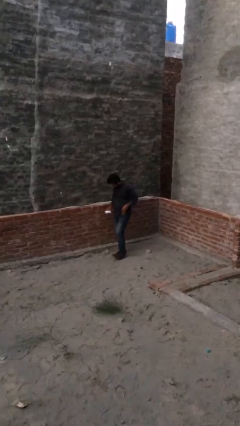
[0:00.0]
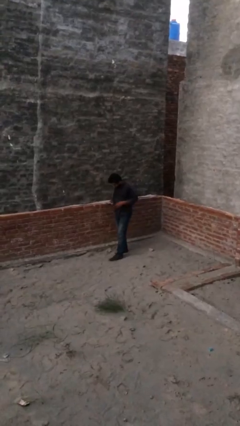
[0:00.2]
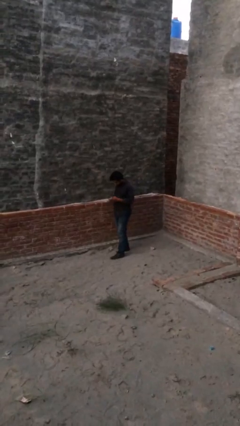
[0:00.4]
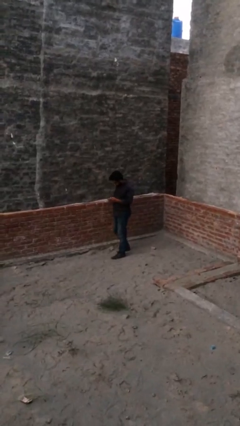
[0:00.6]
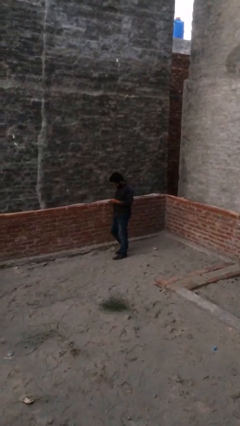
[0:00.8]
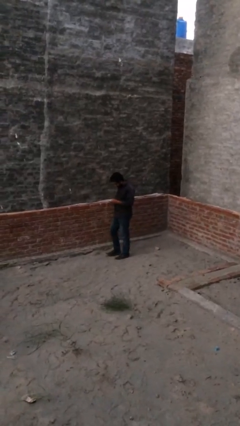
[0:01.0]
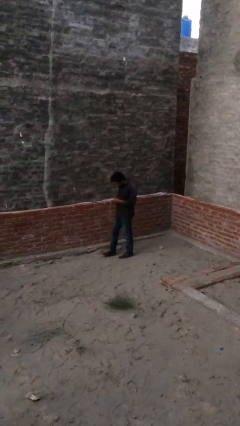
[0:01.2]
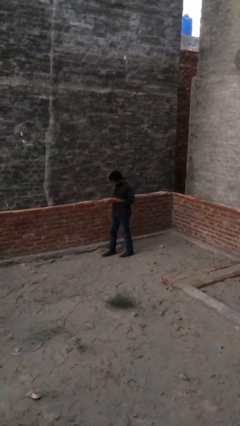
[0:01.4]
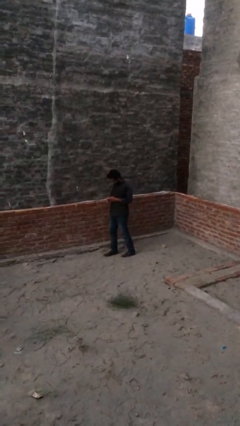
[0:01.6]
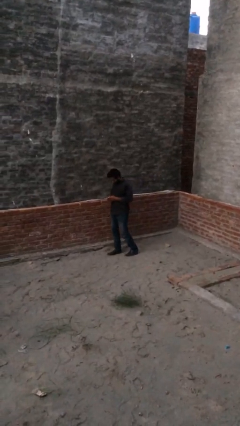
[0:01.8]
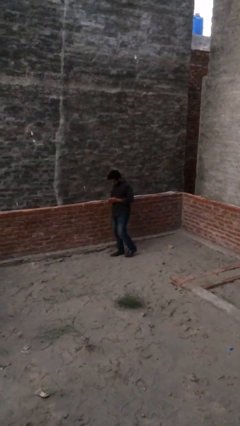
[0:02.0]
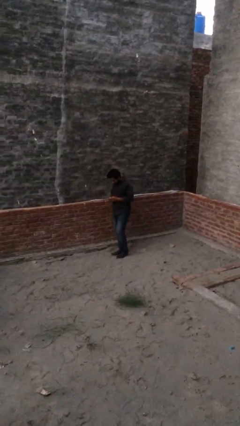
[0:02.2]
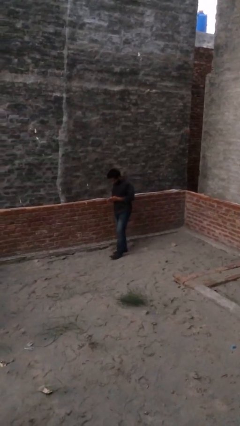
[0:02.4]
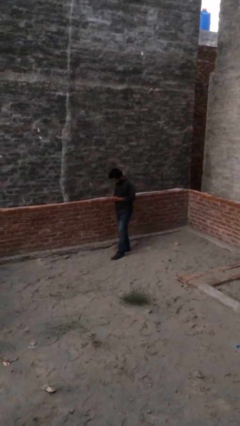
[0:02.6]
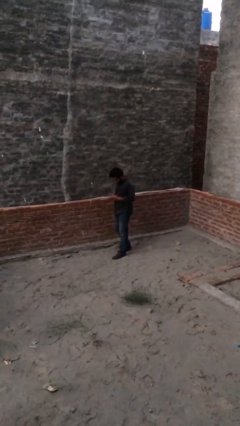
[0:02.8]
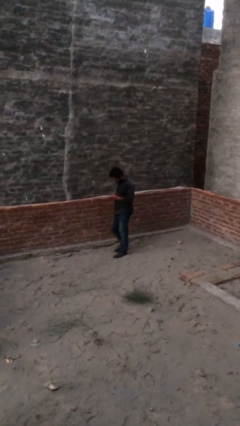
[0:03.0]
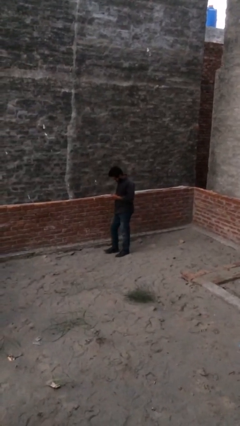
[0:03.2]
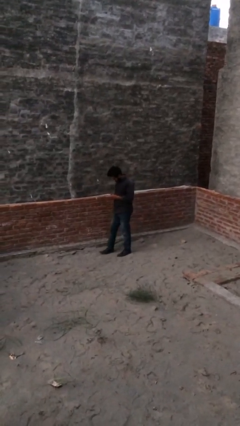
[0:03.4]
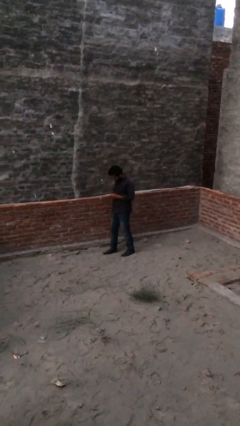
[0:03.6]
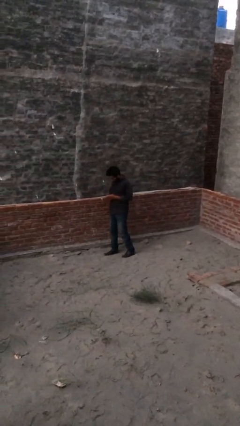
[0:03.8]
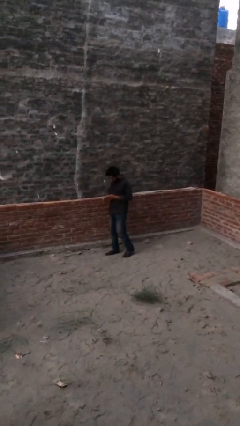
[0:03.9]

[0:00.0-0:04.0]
person texts on phone

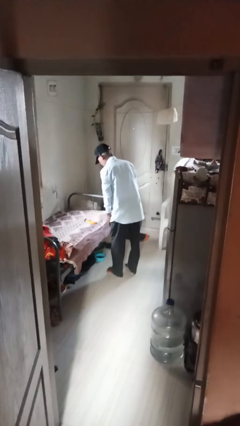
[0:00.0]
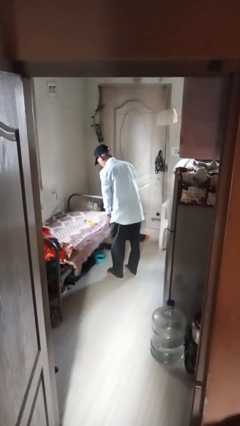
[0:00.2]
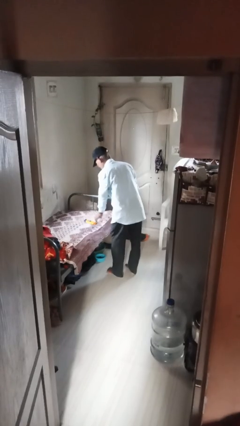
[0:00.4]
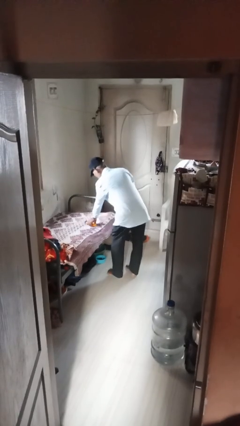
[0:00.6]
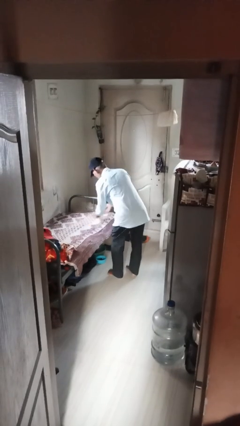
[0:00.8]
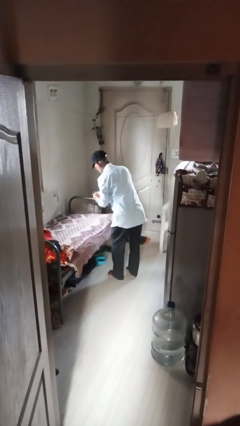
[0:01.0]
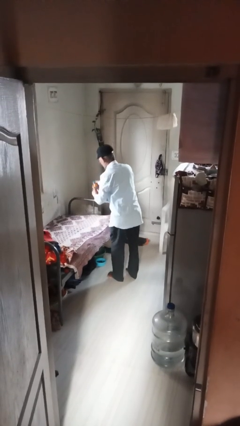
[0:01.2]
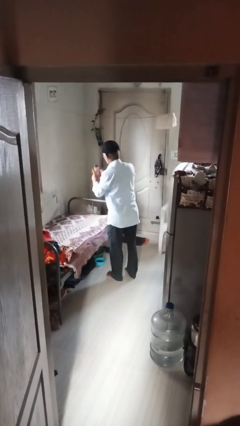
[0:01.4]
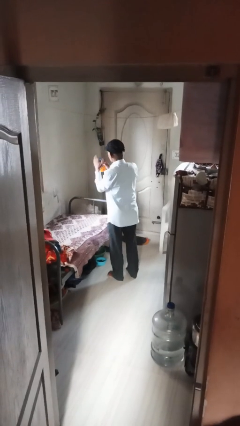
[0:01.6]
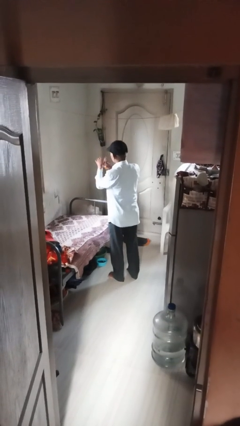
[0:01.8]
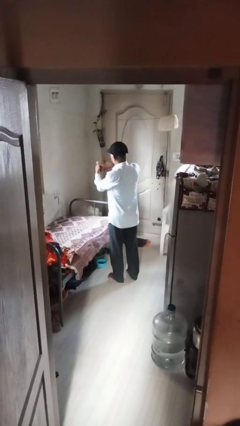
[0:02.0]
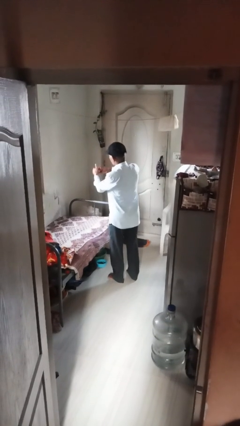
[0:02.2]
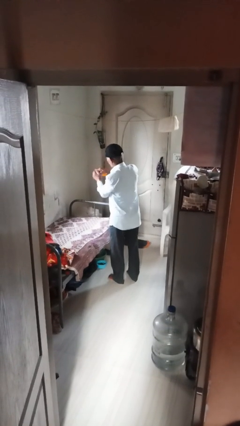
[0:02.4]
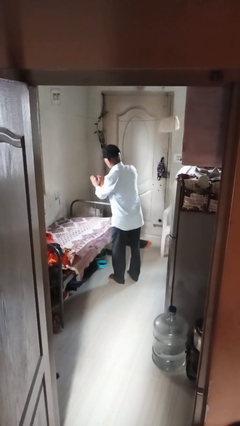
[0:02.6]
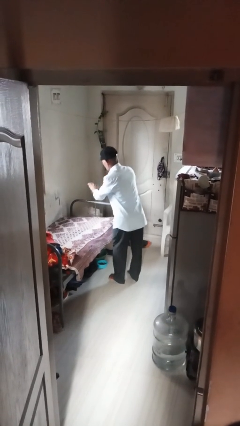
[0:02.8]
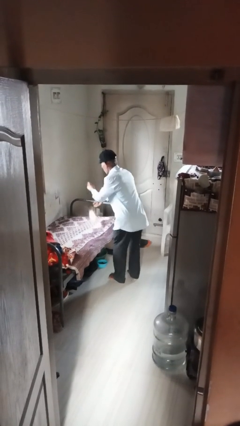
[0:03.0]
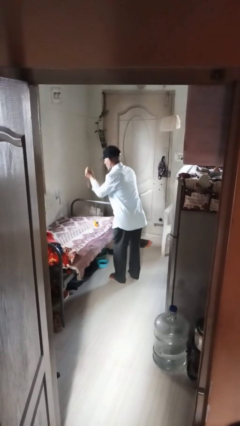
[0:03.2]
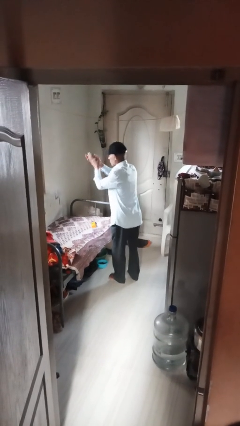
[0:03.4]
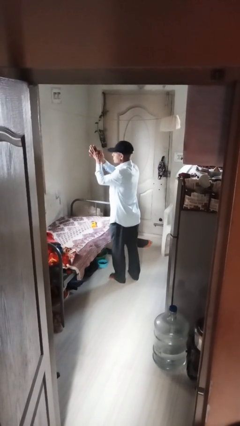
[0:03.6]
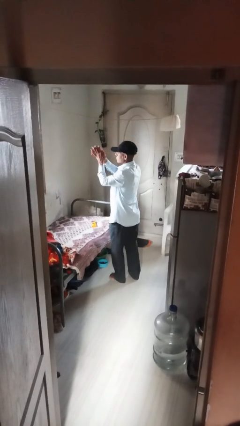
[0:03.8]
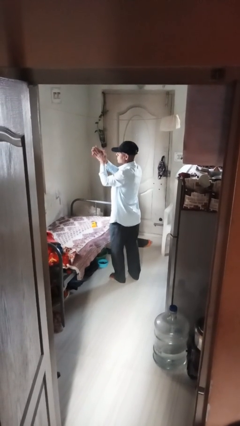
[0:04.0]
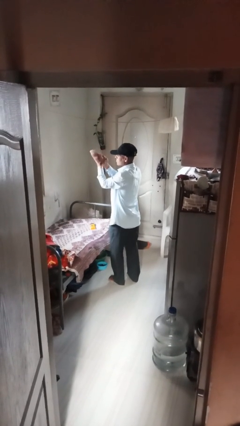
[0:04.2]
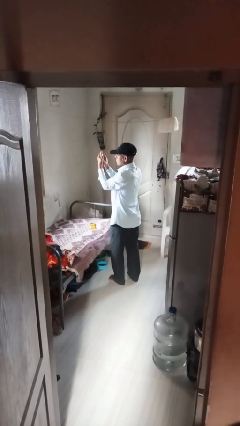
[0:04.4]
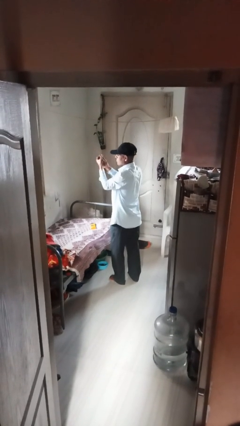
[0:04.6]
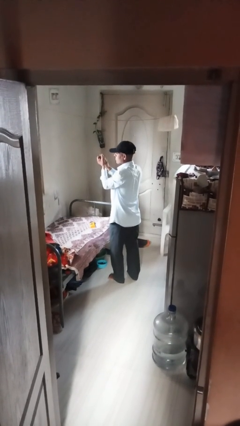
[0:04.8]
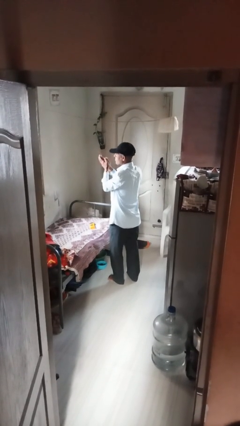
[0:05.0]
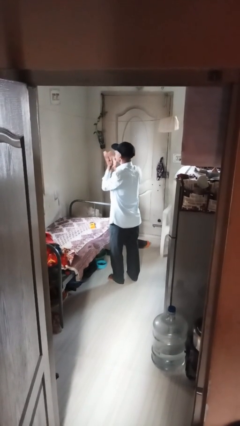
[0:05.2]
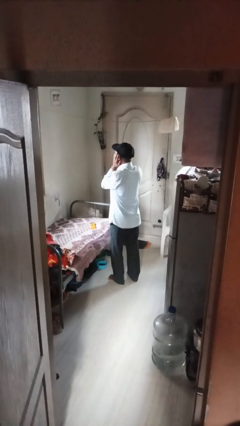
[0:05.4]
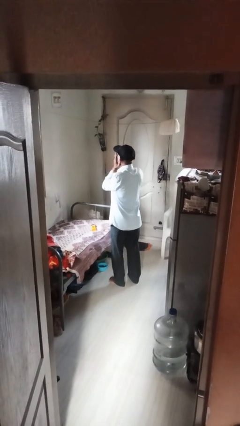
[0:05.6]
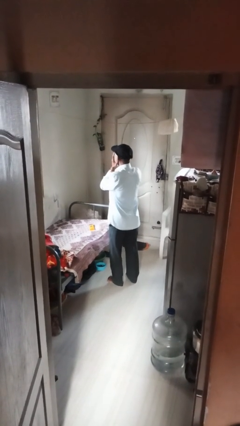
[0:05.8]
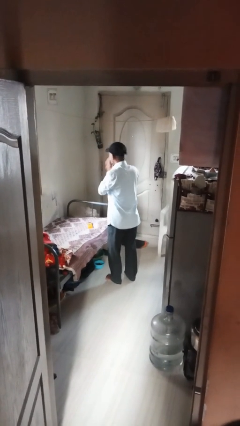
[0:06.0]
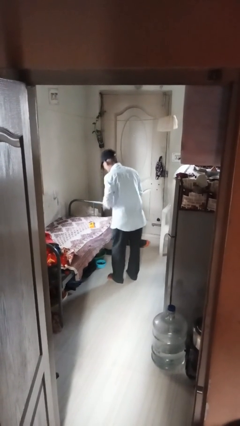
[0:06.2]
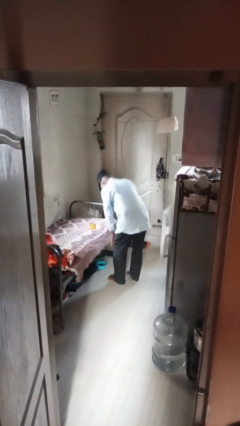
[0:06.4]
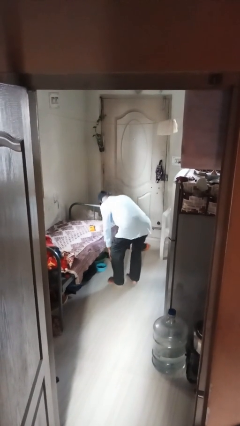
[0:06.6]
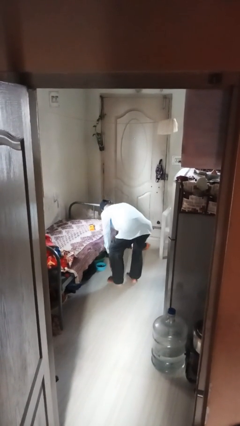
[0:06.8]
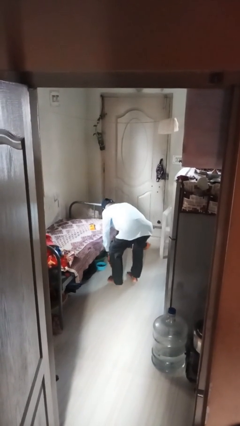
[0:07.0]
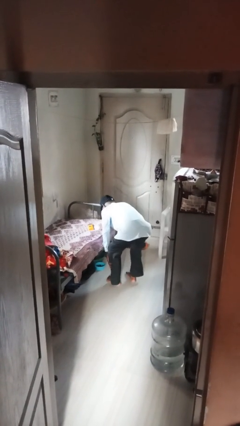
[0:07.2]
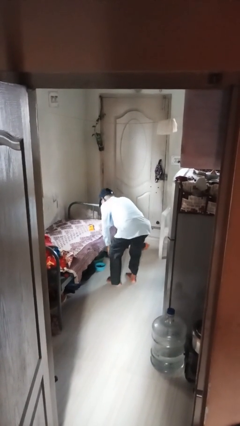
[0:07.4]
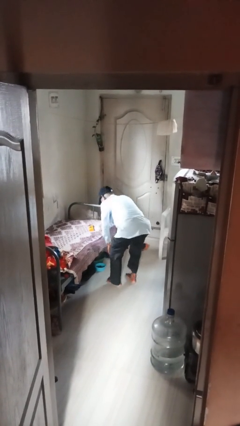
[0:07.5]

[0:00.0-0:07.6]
person applies sunscreen

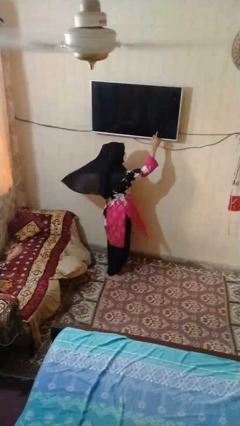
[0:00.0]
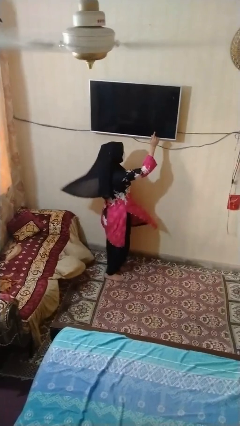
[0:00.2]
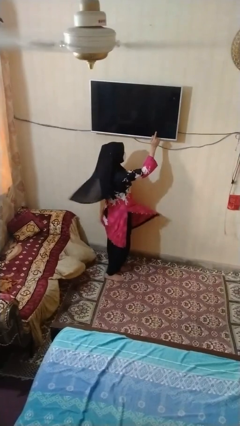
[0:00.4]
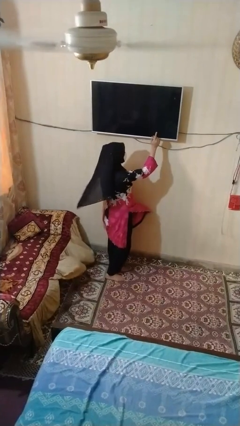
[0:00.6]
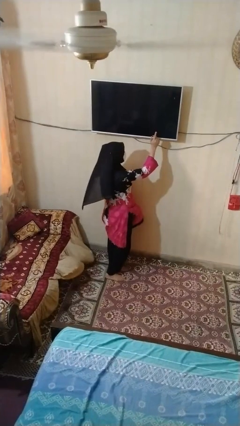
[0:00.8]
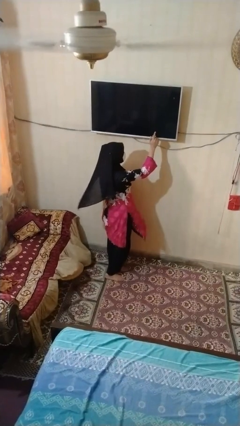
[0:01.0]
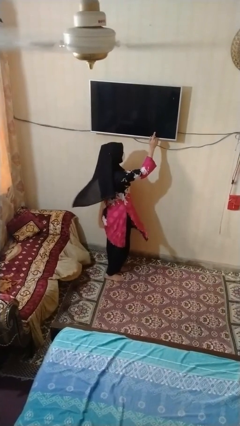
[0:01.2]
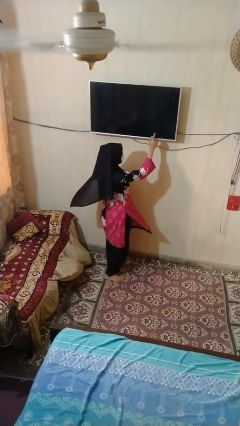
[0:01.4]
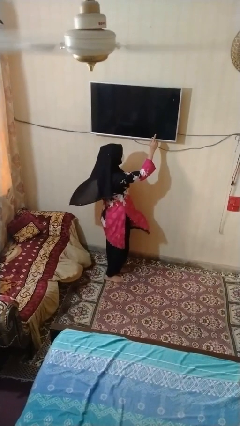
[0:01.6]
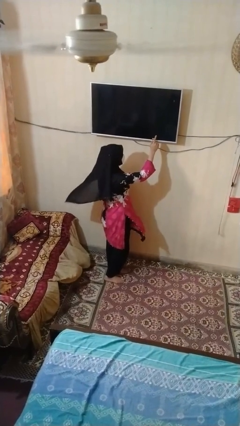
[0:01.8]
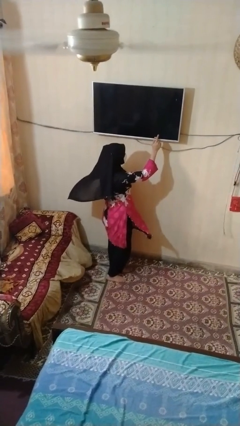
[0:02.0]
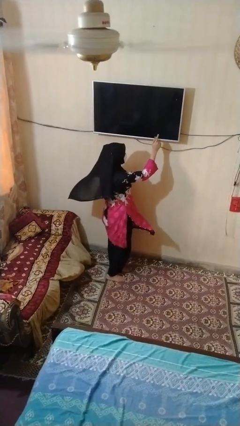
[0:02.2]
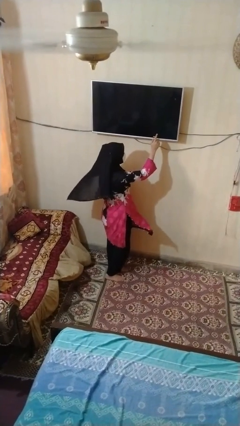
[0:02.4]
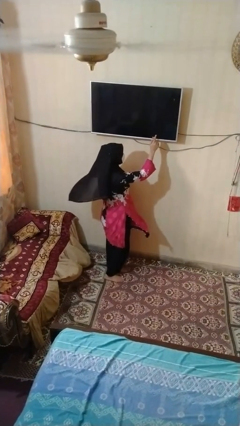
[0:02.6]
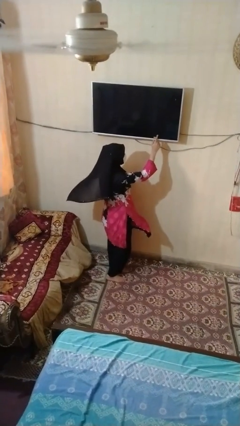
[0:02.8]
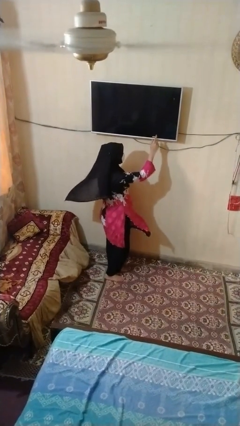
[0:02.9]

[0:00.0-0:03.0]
person taps object with finger

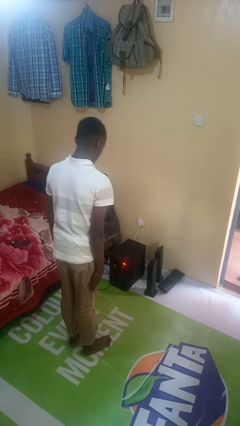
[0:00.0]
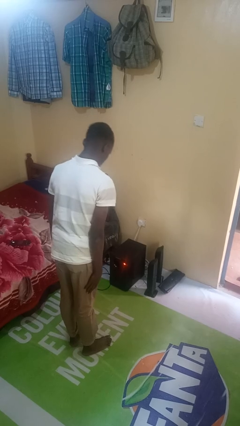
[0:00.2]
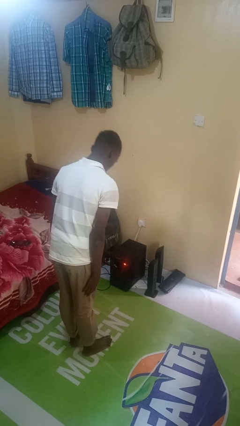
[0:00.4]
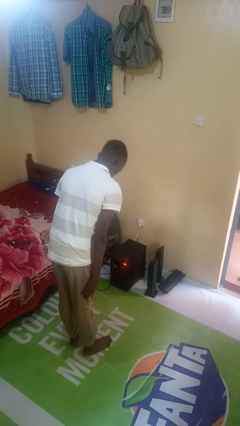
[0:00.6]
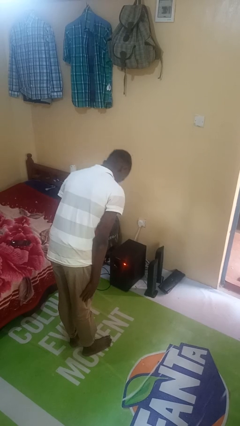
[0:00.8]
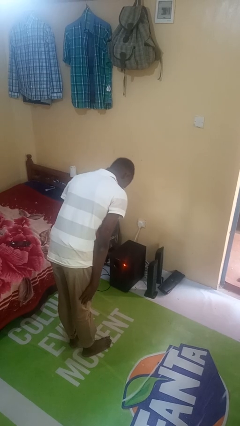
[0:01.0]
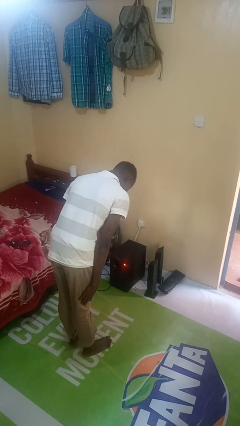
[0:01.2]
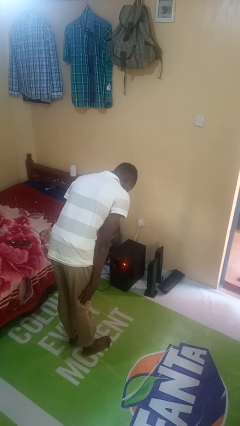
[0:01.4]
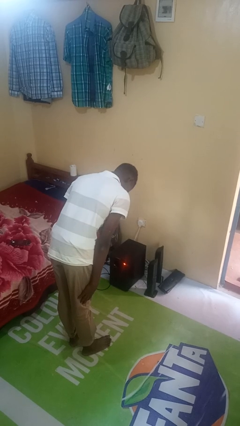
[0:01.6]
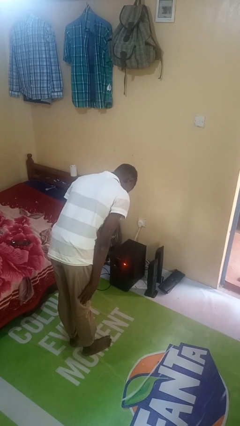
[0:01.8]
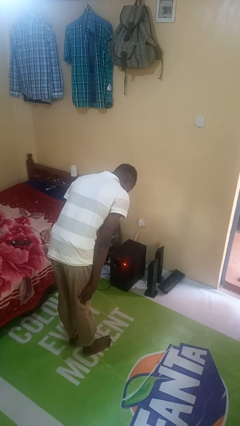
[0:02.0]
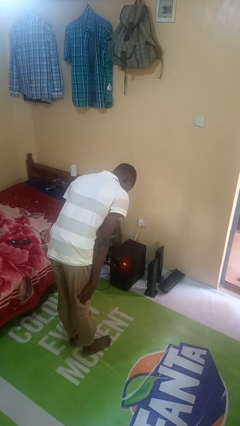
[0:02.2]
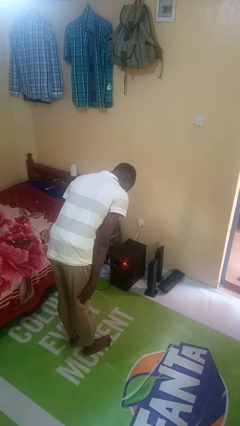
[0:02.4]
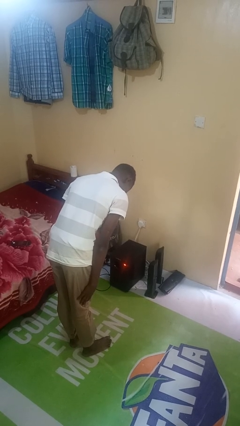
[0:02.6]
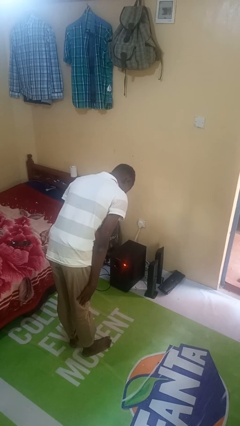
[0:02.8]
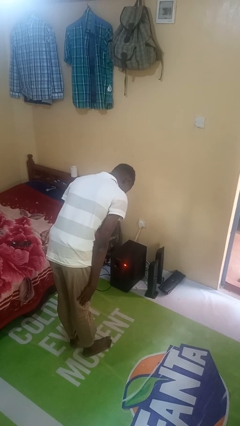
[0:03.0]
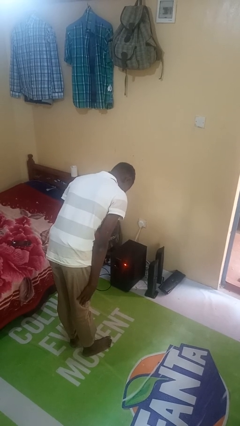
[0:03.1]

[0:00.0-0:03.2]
person bows
